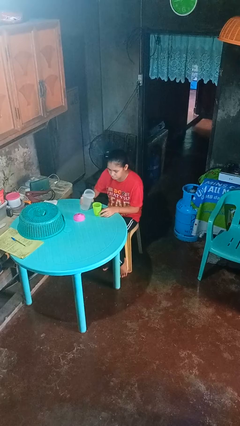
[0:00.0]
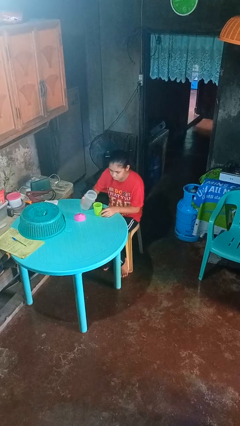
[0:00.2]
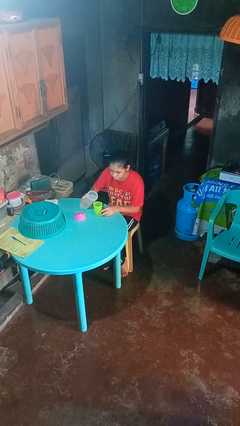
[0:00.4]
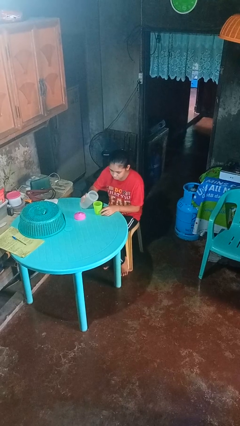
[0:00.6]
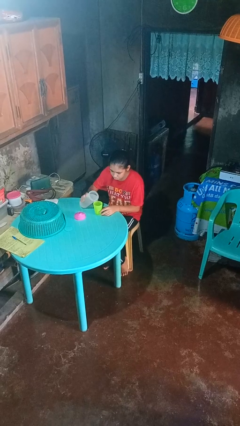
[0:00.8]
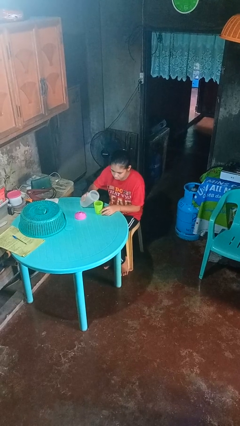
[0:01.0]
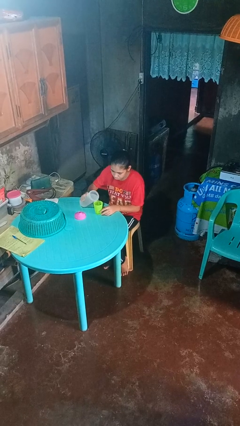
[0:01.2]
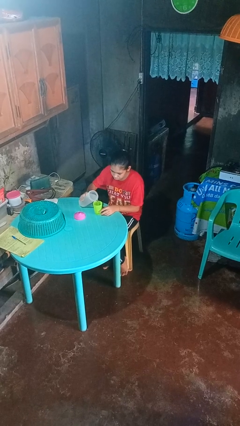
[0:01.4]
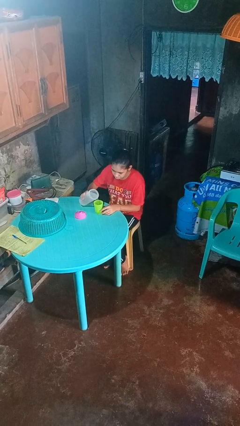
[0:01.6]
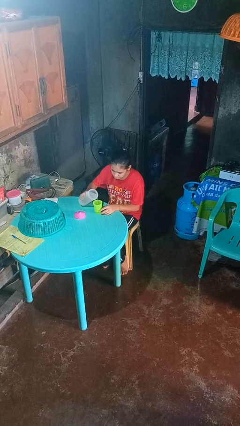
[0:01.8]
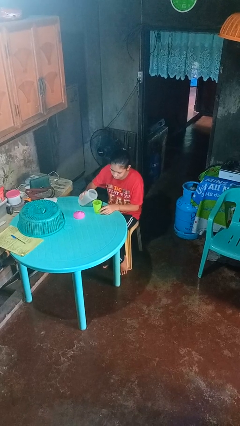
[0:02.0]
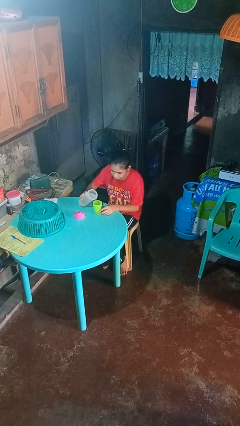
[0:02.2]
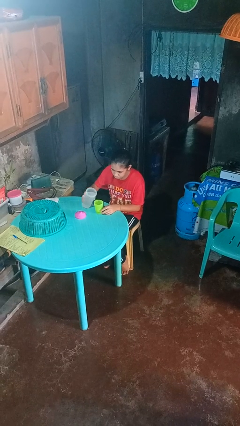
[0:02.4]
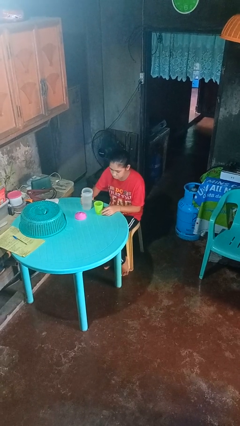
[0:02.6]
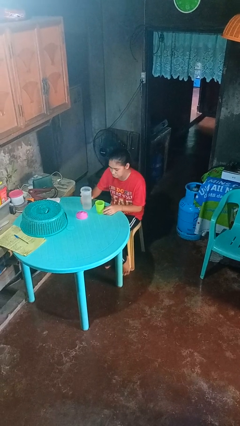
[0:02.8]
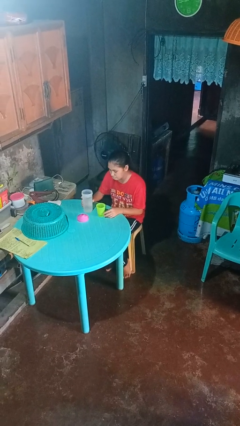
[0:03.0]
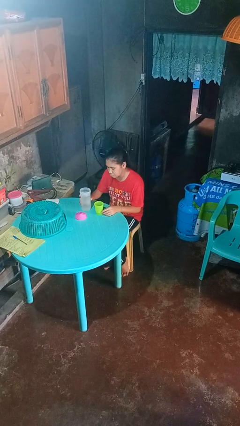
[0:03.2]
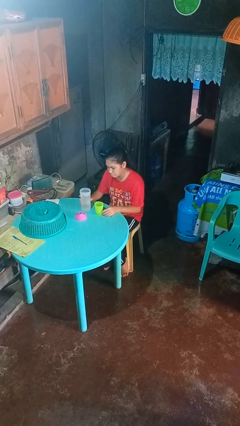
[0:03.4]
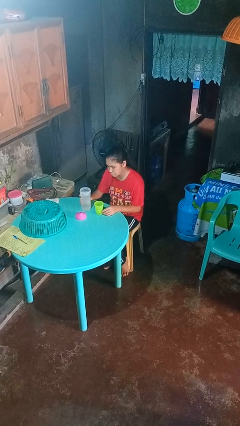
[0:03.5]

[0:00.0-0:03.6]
person pours liquid into cup

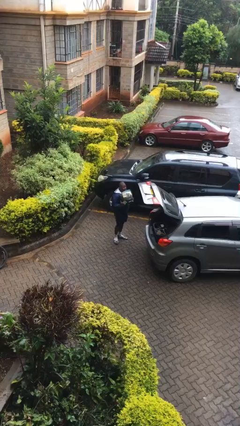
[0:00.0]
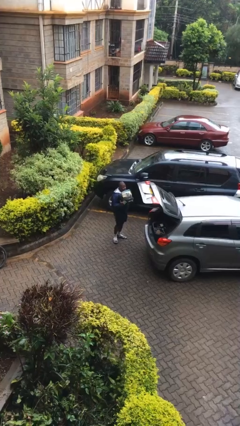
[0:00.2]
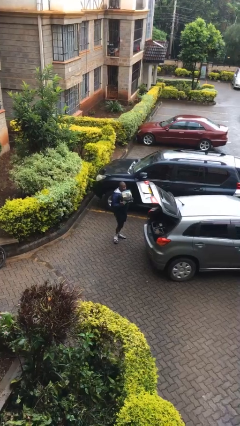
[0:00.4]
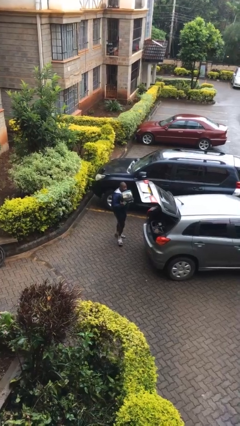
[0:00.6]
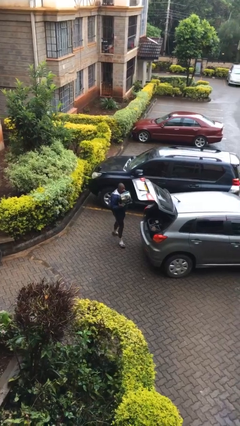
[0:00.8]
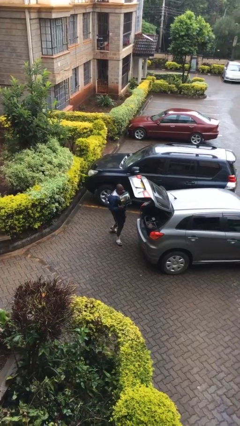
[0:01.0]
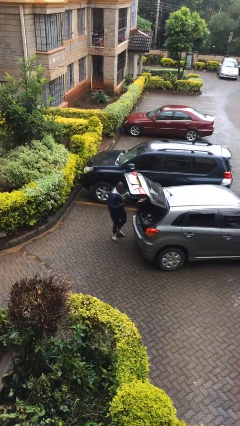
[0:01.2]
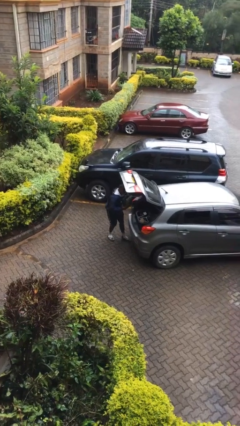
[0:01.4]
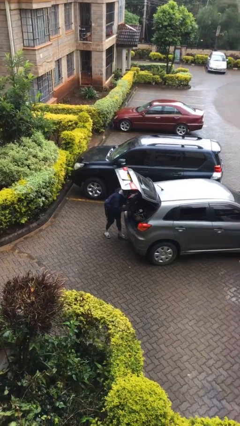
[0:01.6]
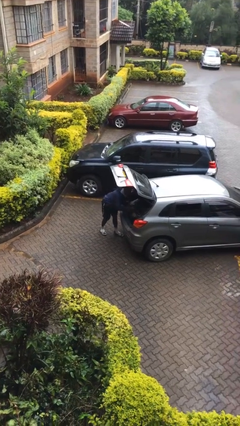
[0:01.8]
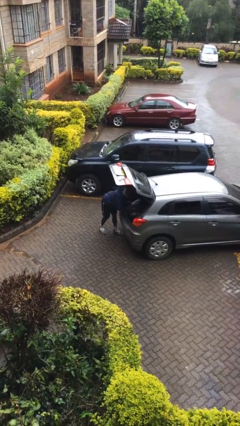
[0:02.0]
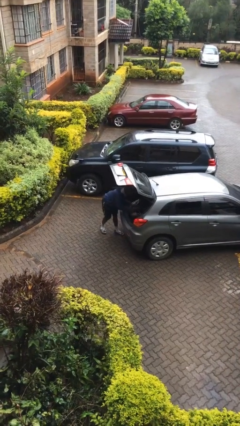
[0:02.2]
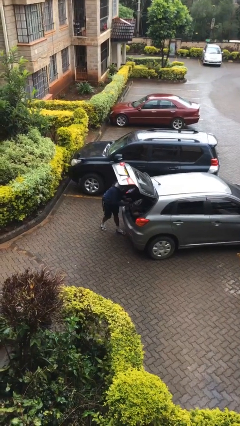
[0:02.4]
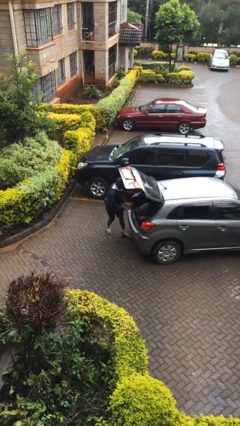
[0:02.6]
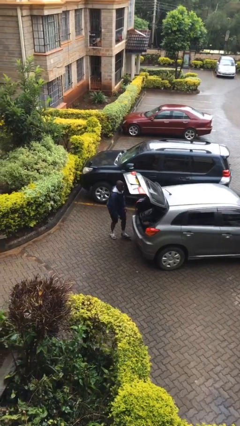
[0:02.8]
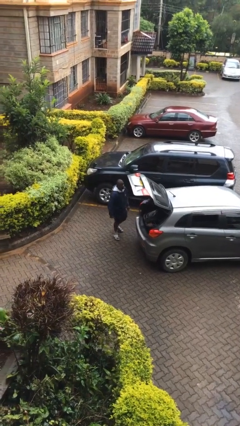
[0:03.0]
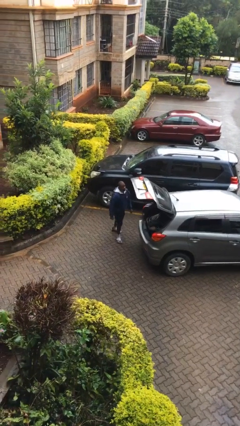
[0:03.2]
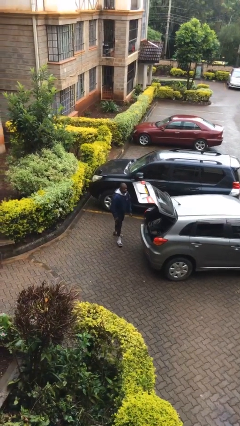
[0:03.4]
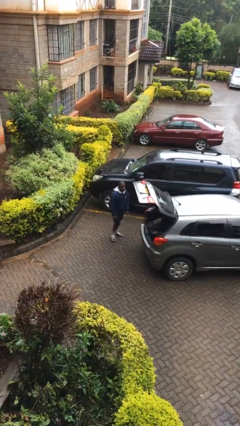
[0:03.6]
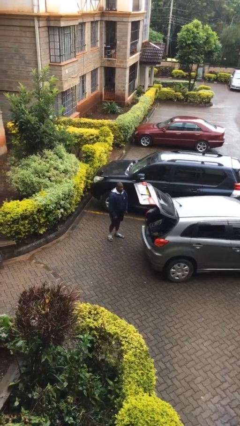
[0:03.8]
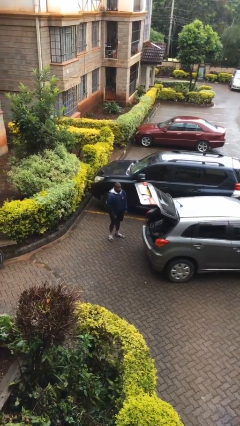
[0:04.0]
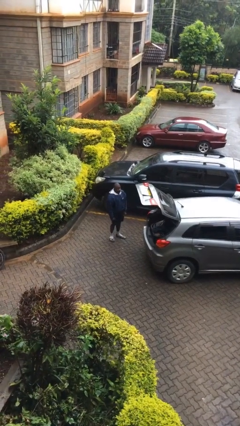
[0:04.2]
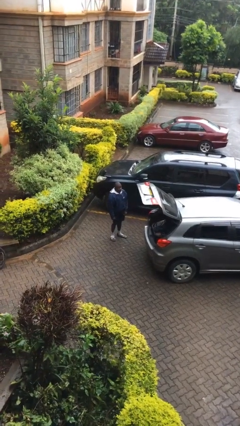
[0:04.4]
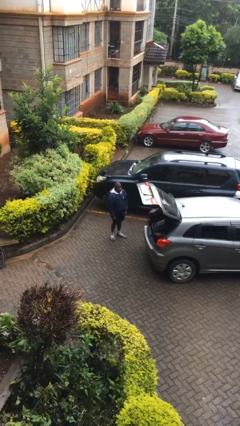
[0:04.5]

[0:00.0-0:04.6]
person loads car

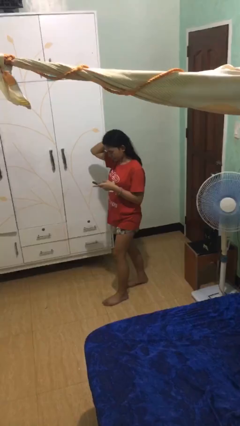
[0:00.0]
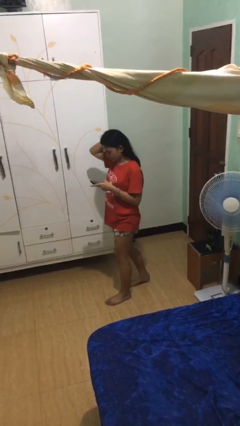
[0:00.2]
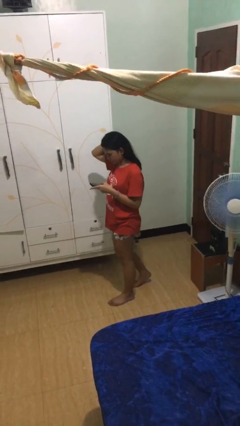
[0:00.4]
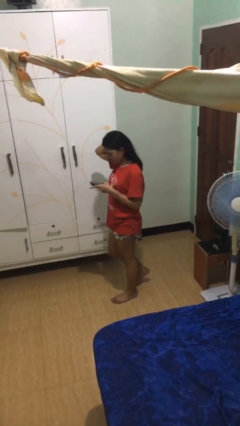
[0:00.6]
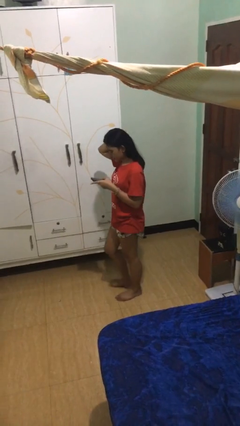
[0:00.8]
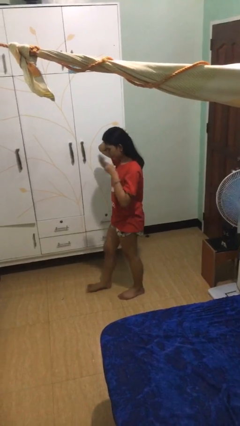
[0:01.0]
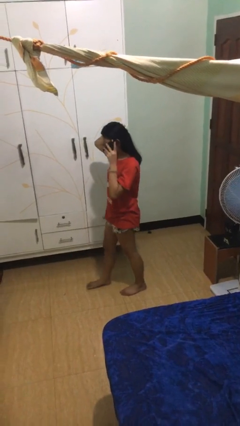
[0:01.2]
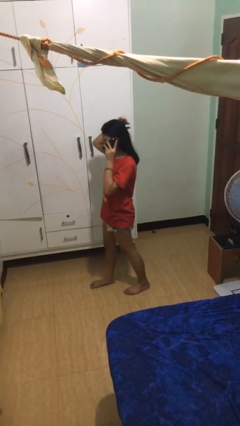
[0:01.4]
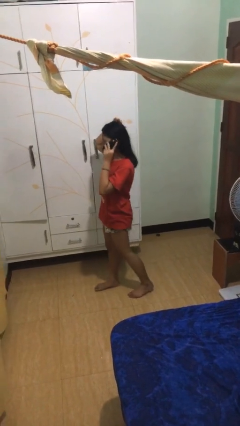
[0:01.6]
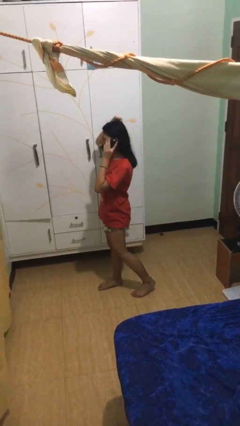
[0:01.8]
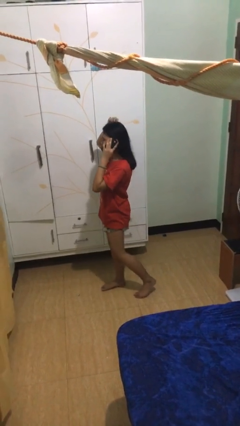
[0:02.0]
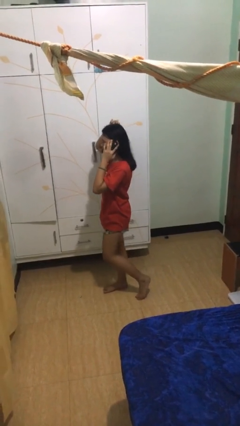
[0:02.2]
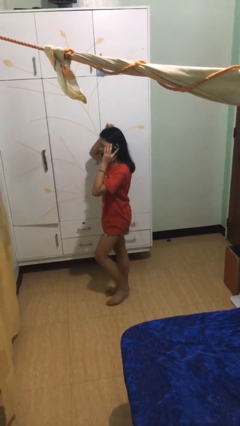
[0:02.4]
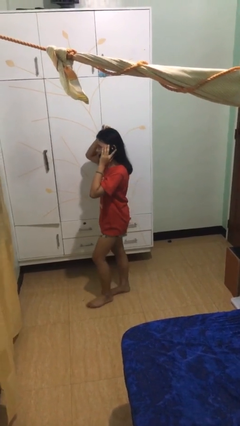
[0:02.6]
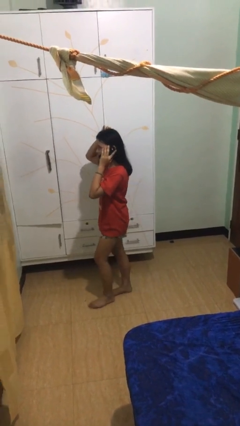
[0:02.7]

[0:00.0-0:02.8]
person talks on phone

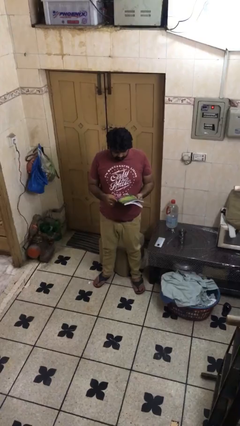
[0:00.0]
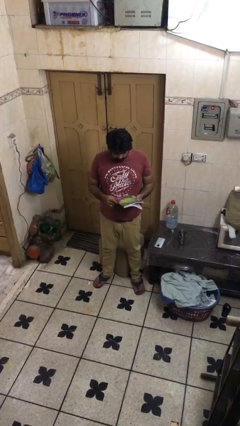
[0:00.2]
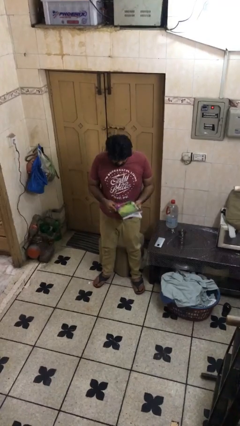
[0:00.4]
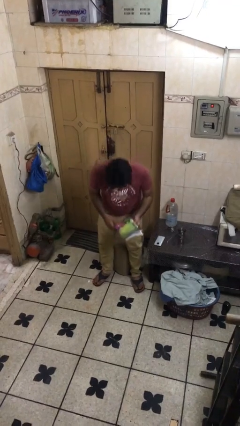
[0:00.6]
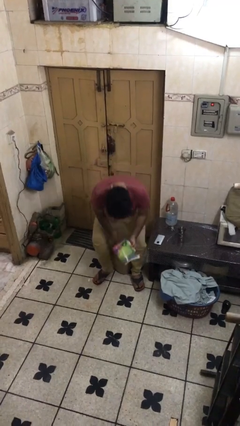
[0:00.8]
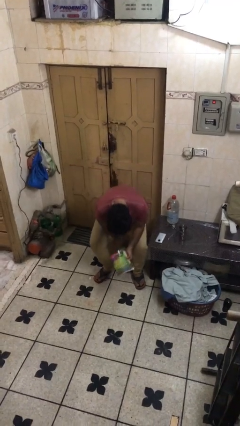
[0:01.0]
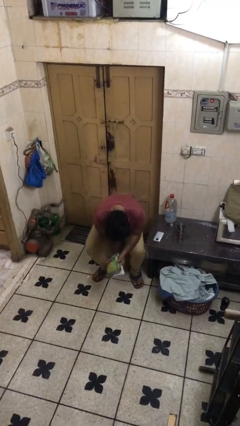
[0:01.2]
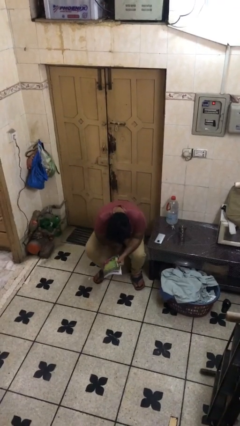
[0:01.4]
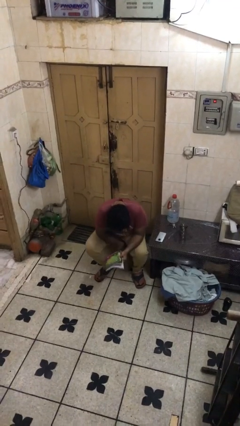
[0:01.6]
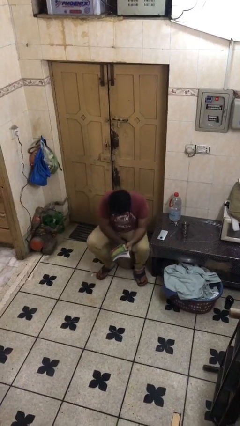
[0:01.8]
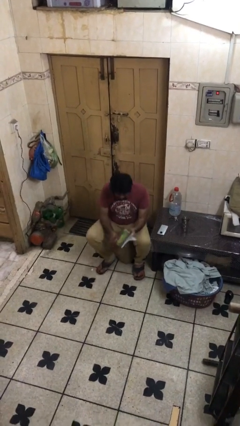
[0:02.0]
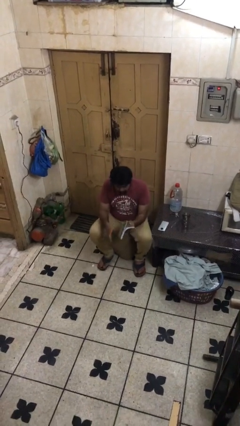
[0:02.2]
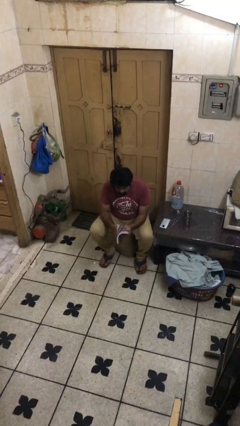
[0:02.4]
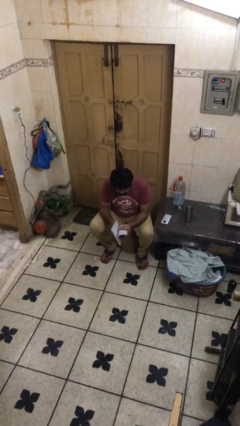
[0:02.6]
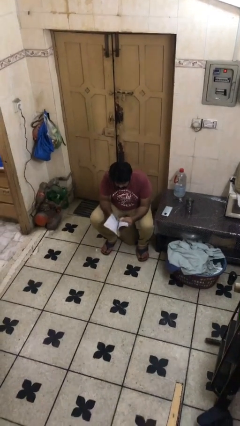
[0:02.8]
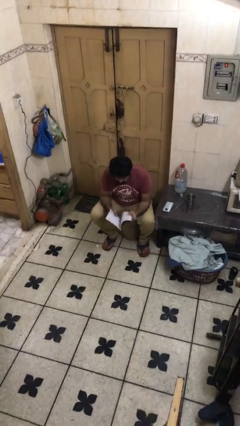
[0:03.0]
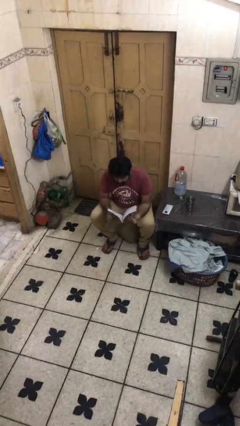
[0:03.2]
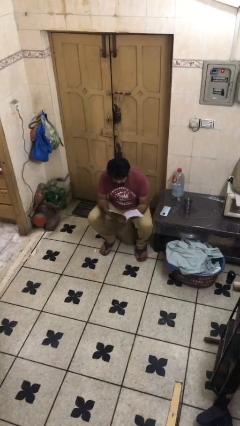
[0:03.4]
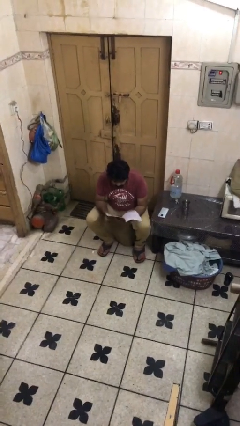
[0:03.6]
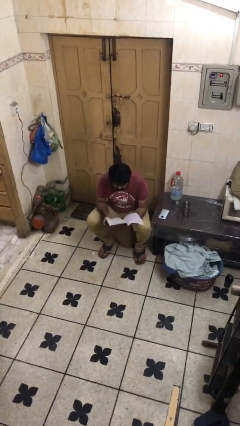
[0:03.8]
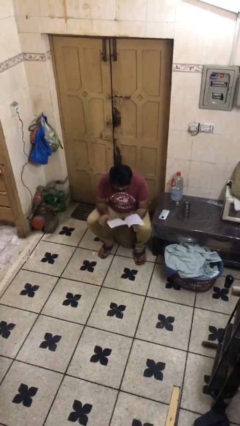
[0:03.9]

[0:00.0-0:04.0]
person sits down

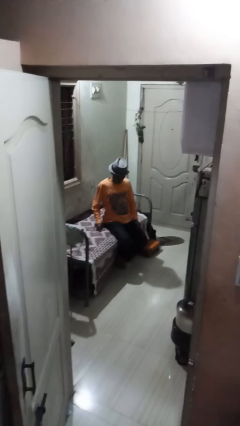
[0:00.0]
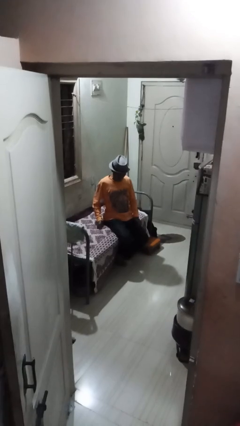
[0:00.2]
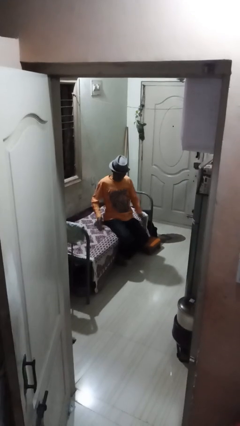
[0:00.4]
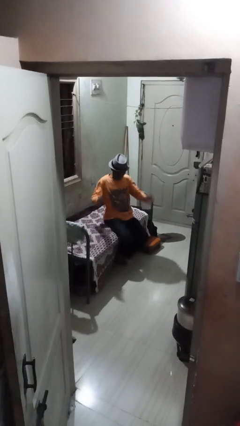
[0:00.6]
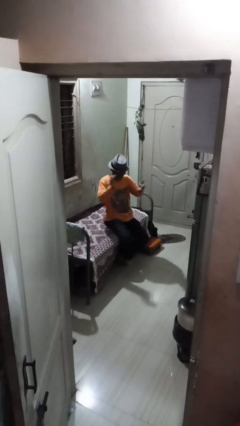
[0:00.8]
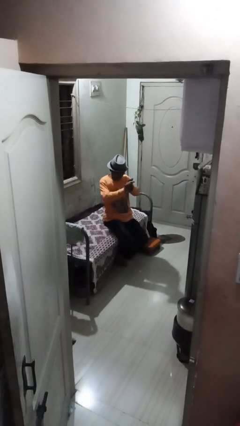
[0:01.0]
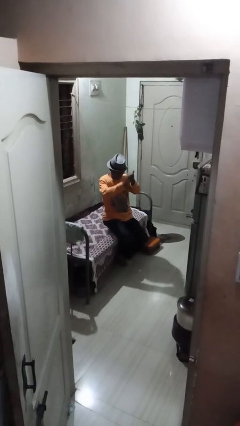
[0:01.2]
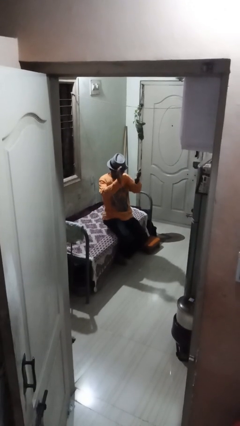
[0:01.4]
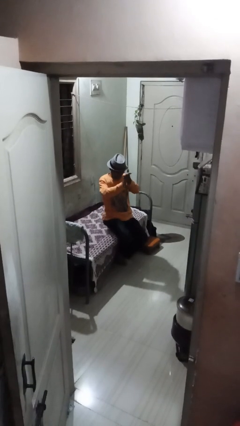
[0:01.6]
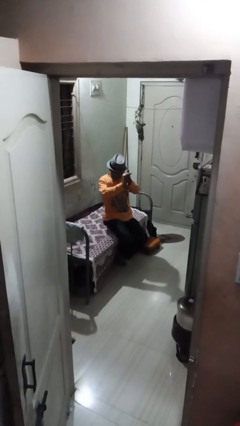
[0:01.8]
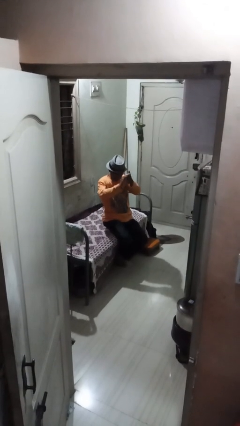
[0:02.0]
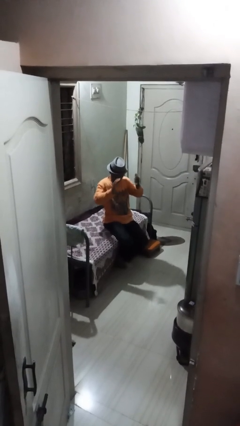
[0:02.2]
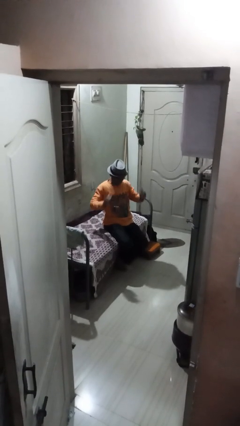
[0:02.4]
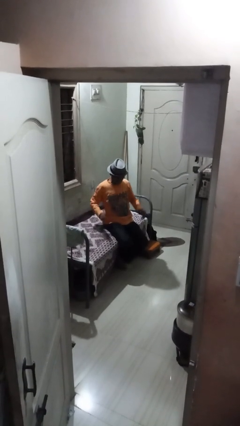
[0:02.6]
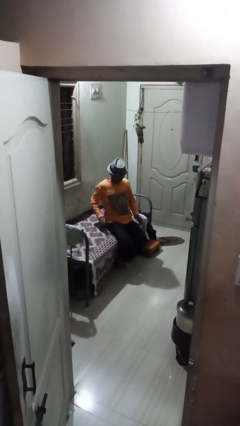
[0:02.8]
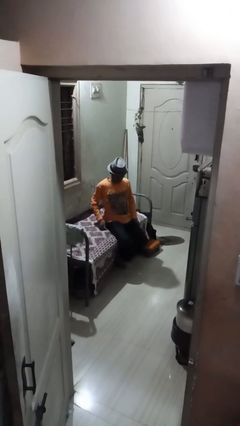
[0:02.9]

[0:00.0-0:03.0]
person claps hands
